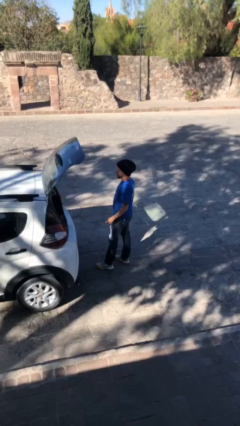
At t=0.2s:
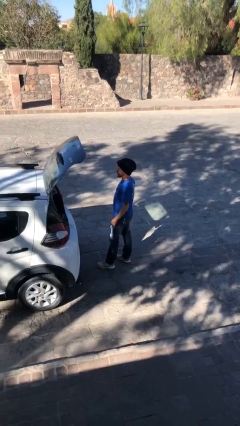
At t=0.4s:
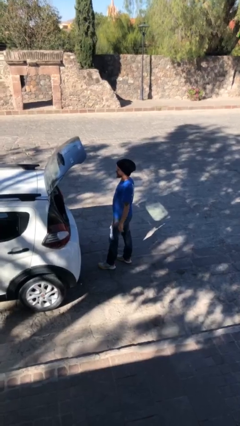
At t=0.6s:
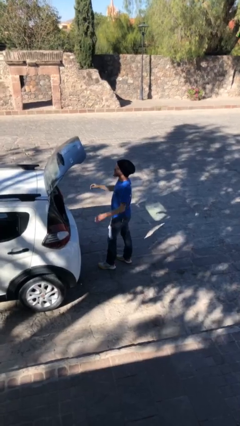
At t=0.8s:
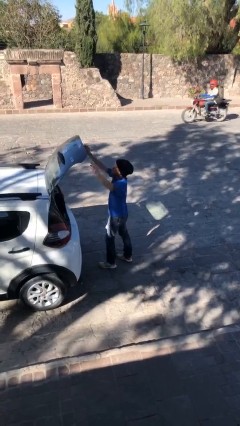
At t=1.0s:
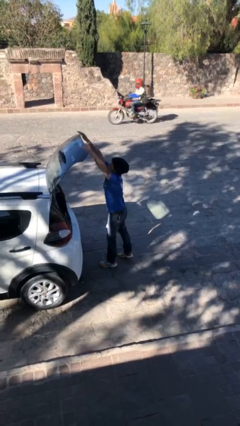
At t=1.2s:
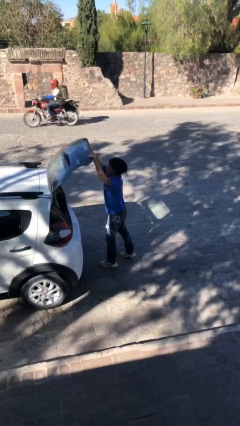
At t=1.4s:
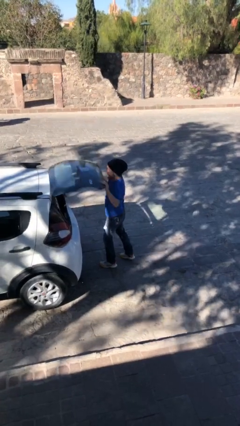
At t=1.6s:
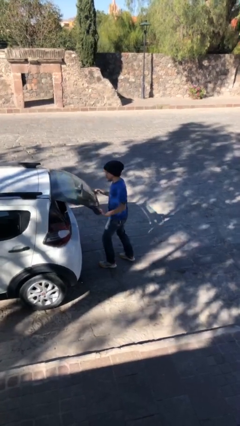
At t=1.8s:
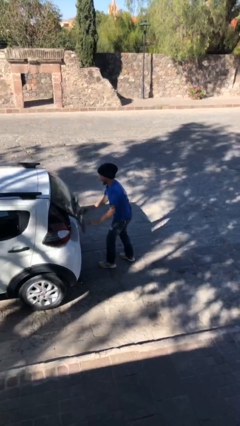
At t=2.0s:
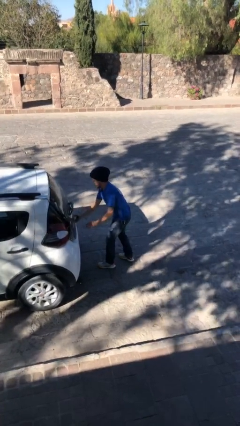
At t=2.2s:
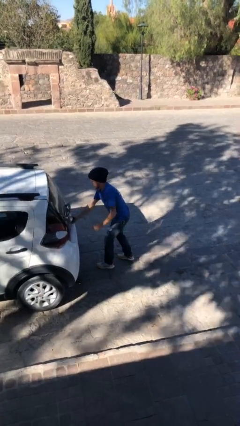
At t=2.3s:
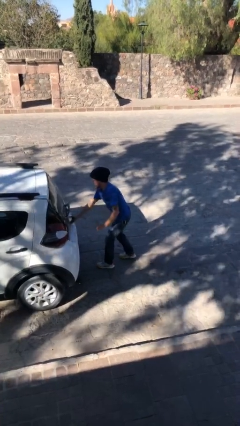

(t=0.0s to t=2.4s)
person closes car trunk

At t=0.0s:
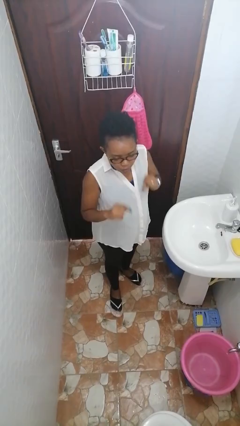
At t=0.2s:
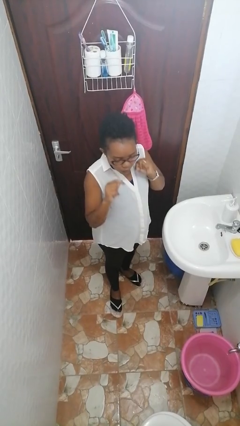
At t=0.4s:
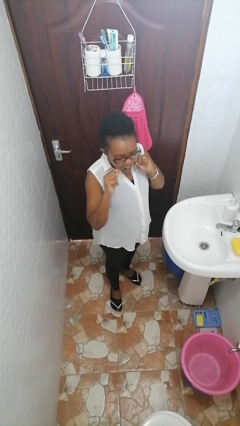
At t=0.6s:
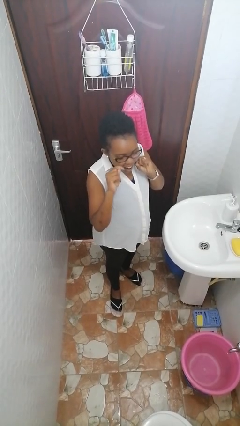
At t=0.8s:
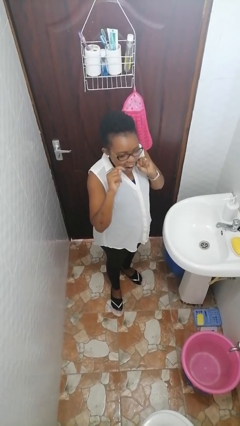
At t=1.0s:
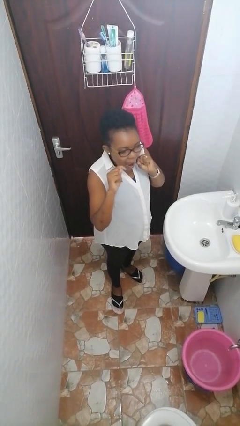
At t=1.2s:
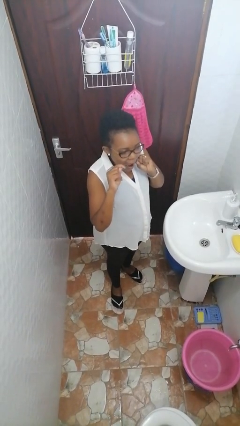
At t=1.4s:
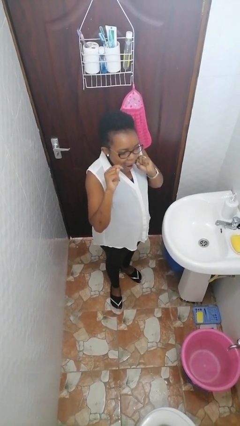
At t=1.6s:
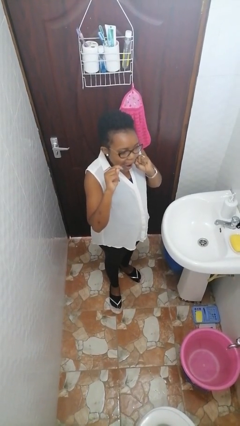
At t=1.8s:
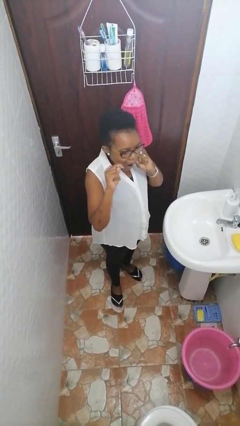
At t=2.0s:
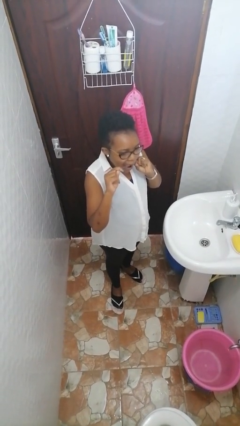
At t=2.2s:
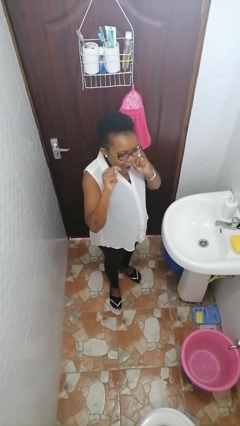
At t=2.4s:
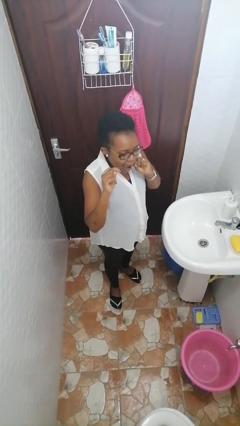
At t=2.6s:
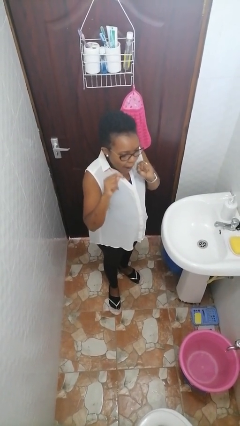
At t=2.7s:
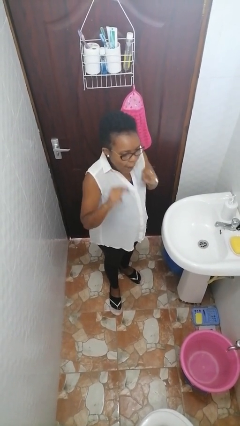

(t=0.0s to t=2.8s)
person flosses

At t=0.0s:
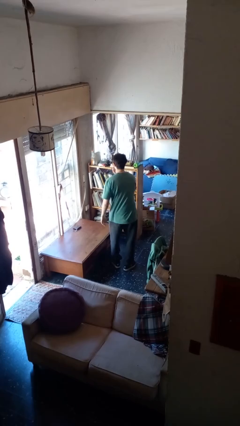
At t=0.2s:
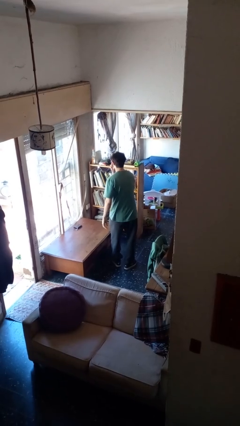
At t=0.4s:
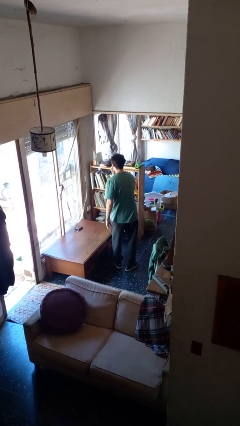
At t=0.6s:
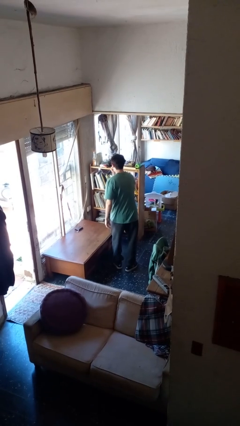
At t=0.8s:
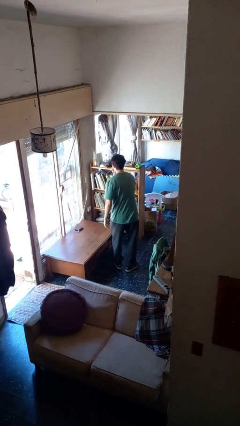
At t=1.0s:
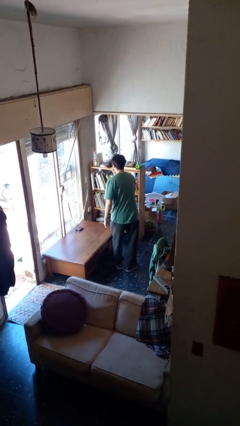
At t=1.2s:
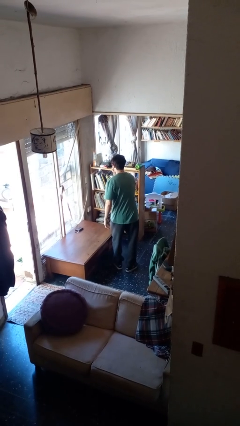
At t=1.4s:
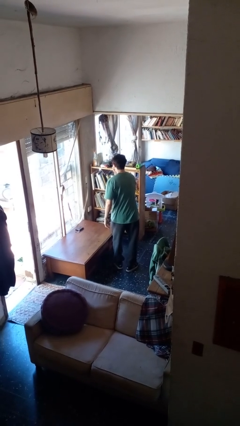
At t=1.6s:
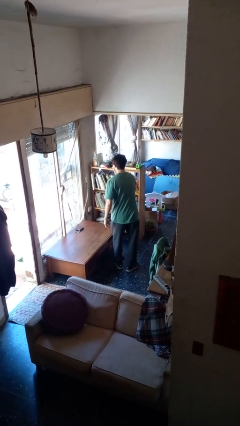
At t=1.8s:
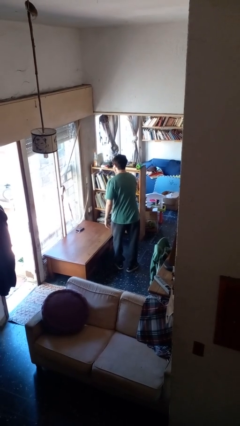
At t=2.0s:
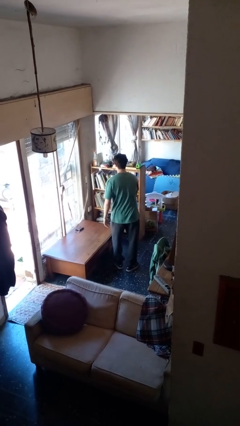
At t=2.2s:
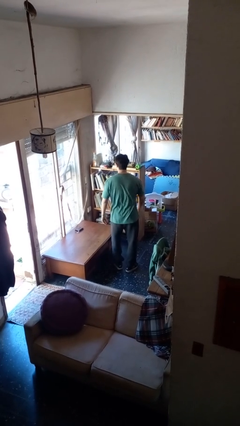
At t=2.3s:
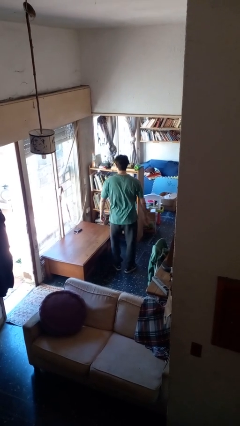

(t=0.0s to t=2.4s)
person gestures watch closely

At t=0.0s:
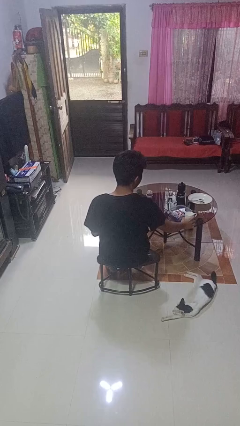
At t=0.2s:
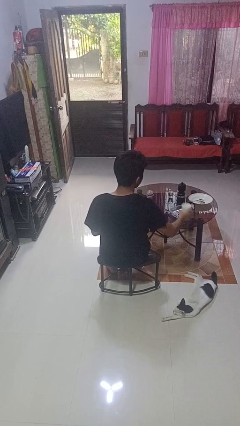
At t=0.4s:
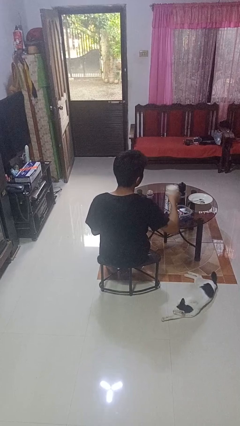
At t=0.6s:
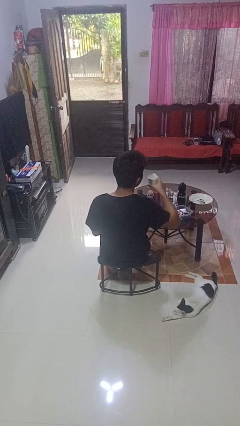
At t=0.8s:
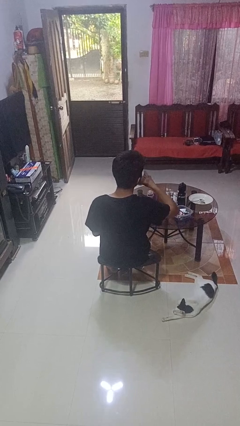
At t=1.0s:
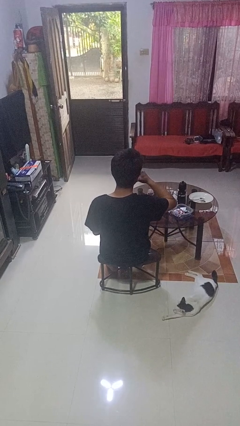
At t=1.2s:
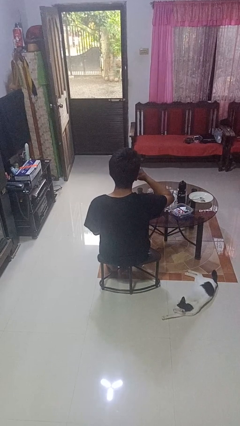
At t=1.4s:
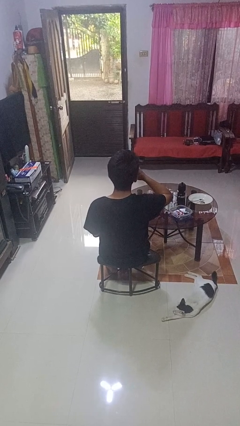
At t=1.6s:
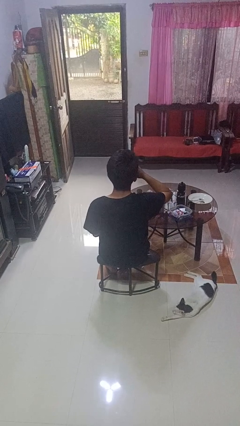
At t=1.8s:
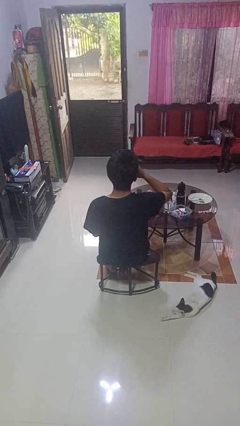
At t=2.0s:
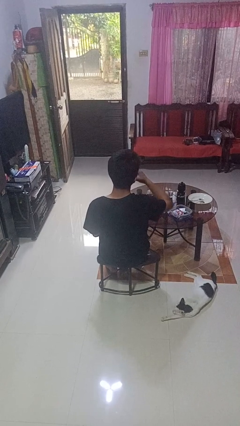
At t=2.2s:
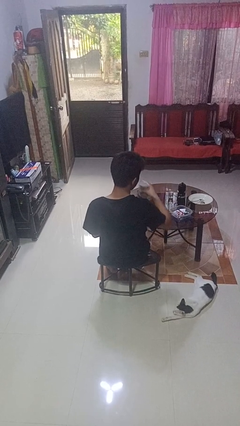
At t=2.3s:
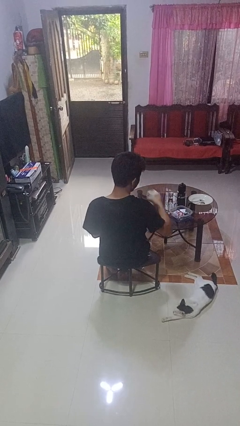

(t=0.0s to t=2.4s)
person drinks from cup

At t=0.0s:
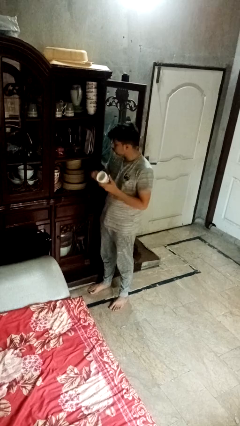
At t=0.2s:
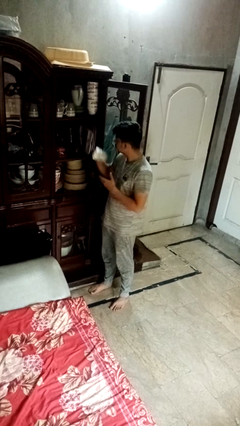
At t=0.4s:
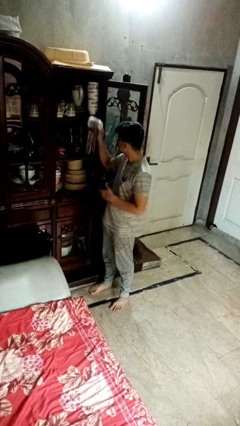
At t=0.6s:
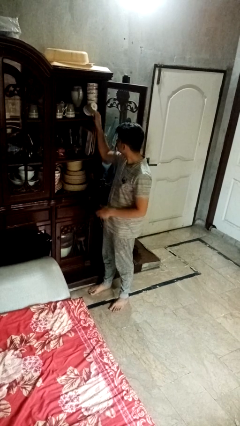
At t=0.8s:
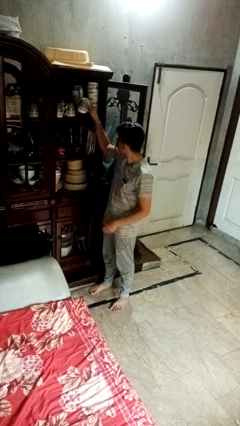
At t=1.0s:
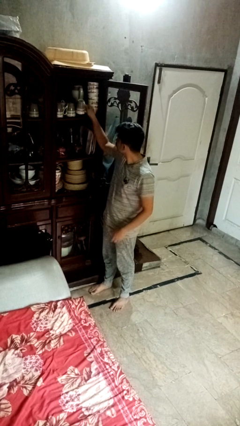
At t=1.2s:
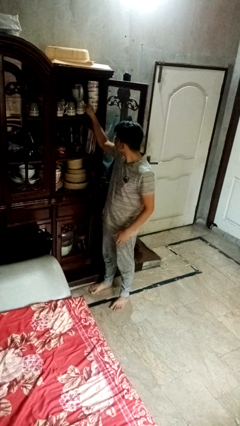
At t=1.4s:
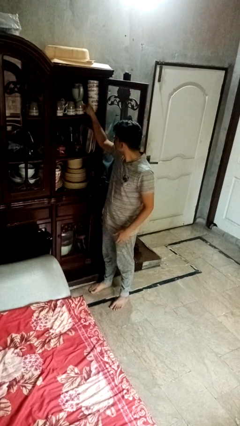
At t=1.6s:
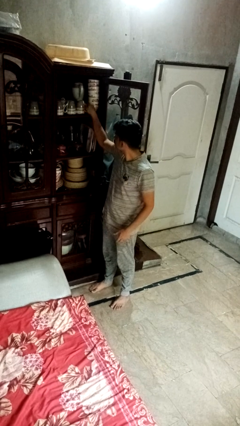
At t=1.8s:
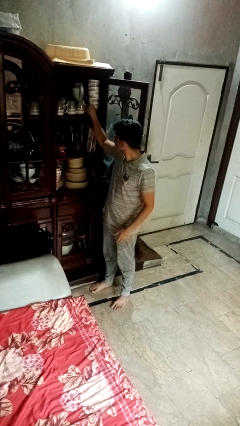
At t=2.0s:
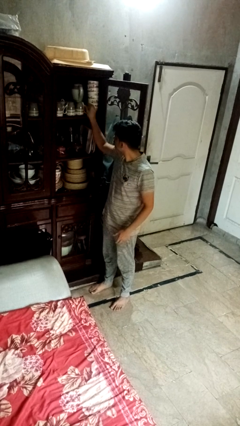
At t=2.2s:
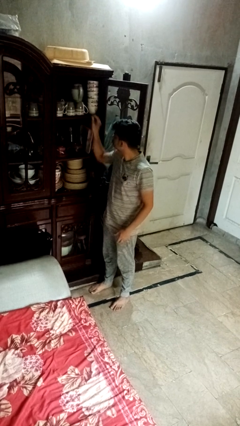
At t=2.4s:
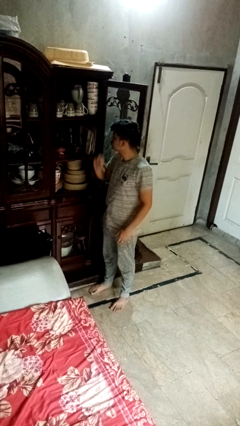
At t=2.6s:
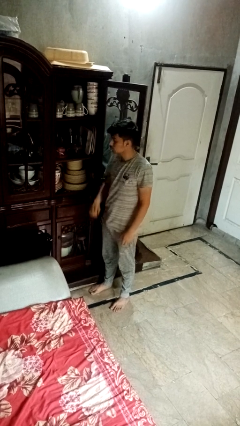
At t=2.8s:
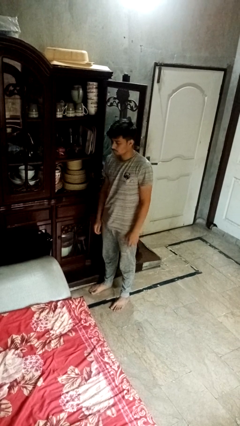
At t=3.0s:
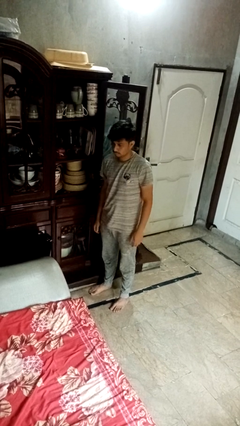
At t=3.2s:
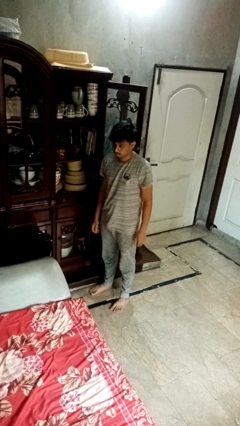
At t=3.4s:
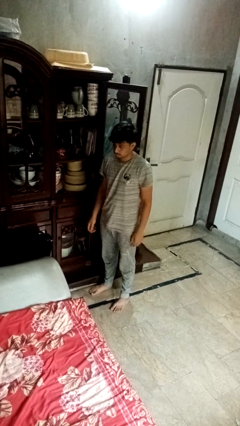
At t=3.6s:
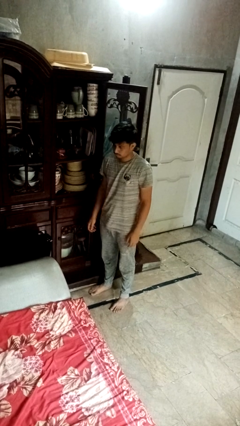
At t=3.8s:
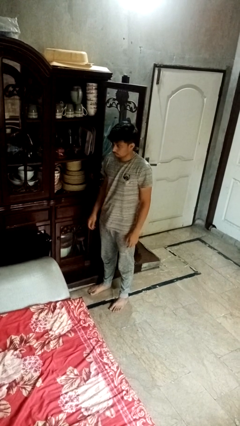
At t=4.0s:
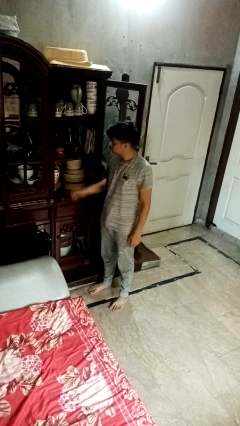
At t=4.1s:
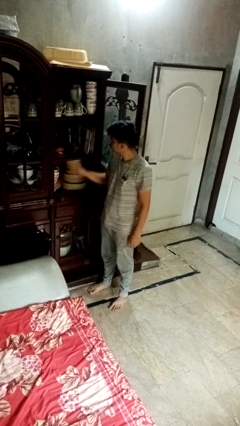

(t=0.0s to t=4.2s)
person puts object in cabinet

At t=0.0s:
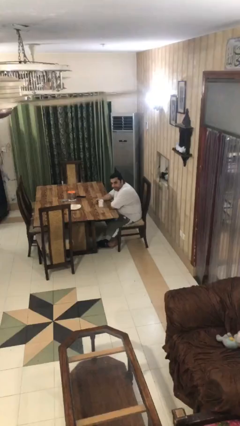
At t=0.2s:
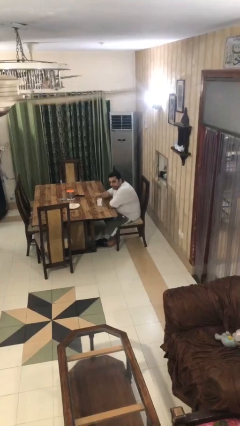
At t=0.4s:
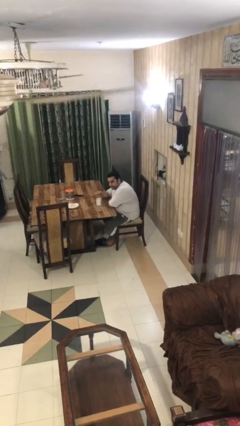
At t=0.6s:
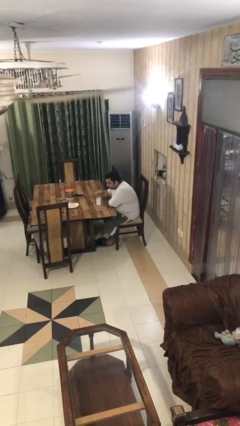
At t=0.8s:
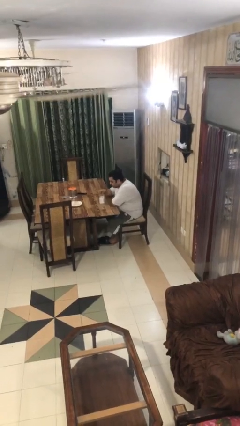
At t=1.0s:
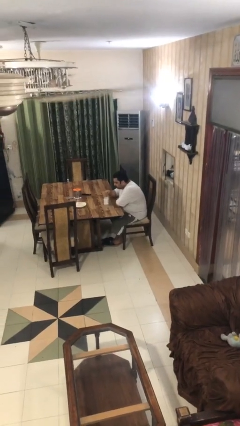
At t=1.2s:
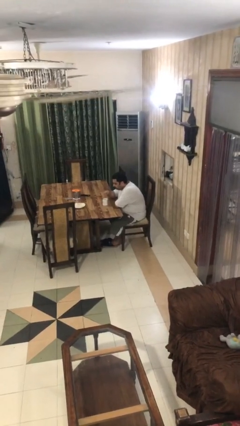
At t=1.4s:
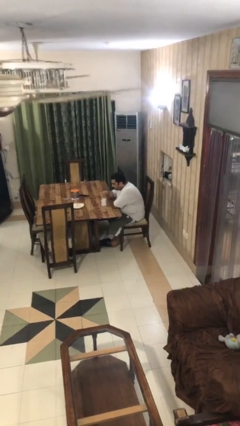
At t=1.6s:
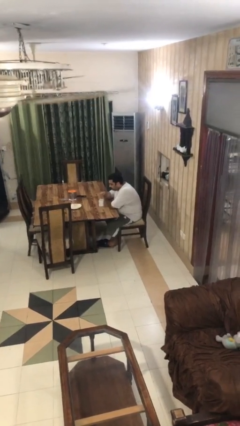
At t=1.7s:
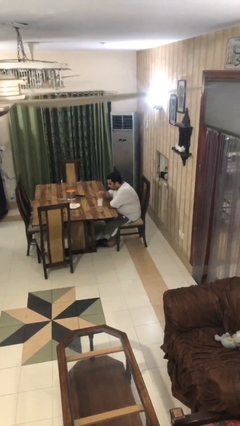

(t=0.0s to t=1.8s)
person stirs mug

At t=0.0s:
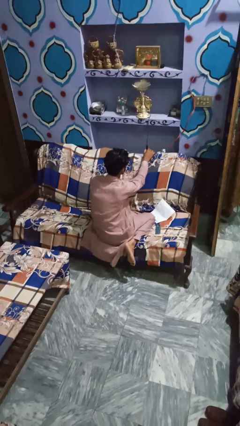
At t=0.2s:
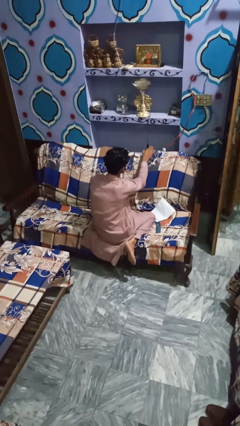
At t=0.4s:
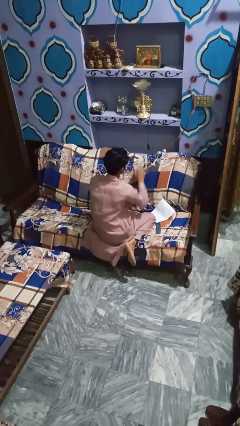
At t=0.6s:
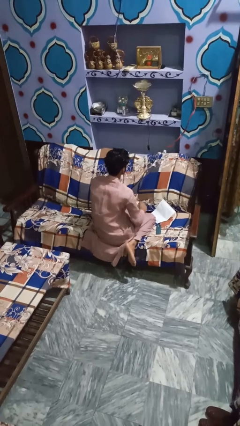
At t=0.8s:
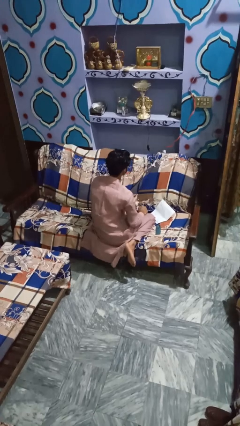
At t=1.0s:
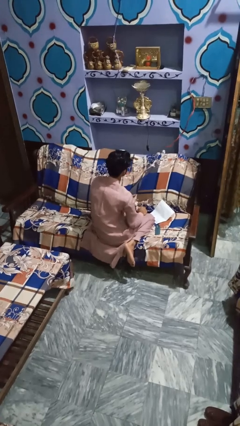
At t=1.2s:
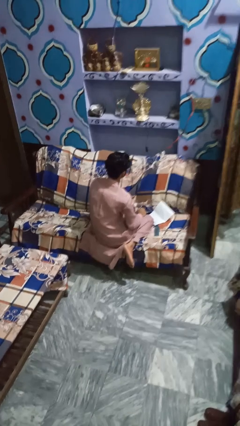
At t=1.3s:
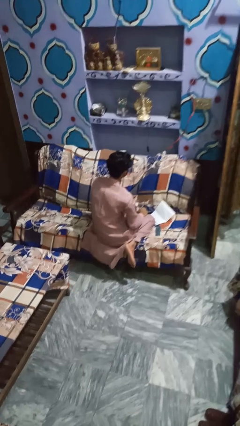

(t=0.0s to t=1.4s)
person turns on lamp
